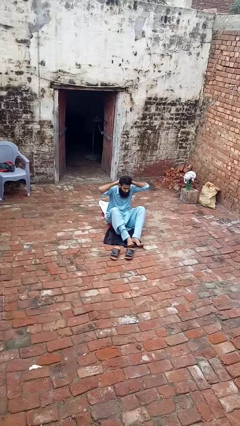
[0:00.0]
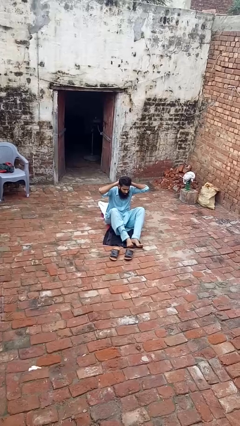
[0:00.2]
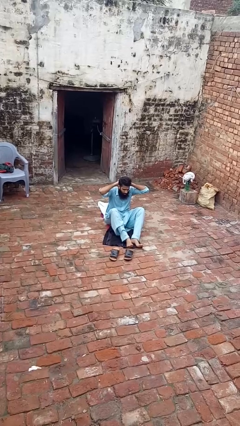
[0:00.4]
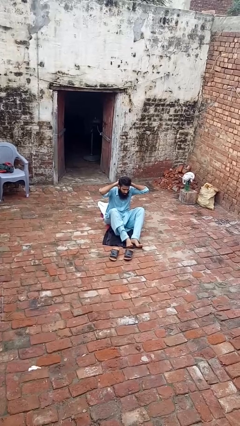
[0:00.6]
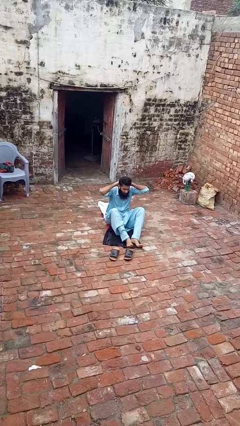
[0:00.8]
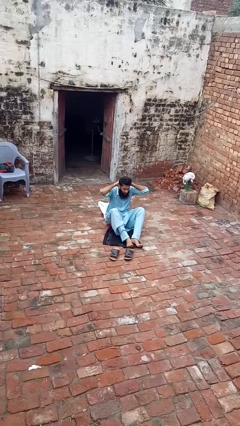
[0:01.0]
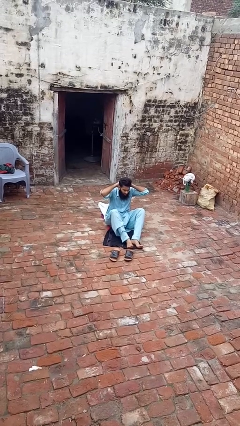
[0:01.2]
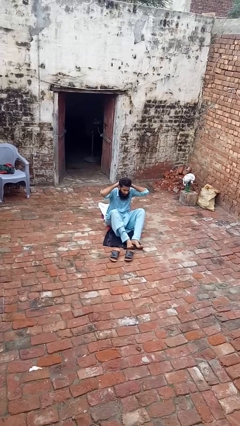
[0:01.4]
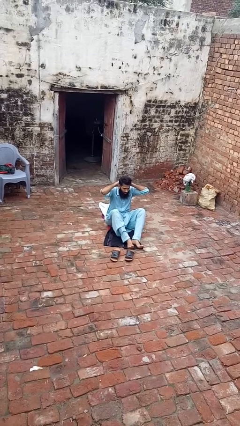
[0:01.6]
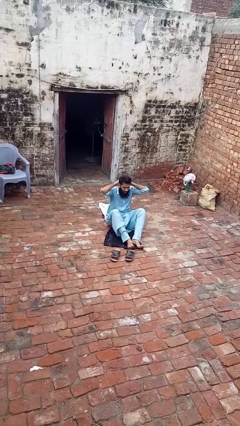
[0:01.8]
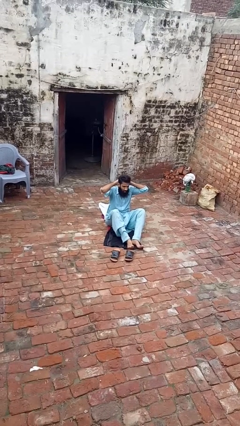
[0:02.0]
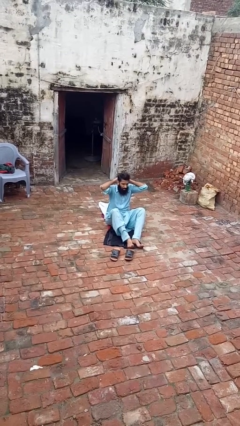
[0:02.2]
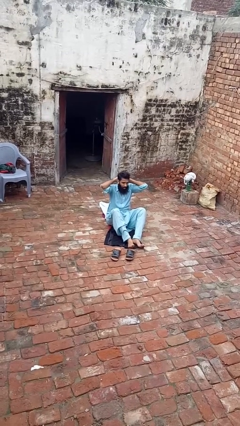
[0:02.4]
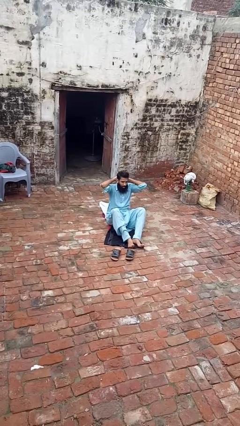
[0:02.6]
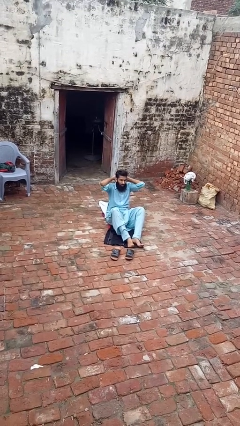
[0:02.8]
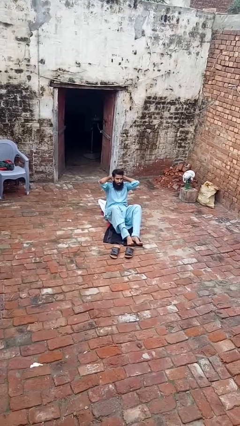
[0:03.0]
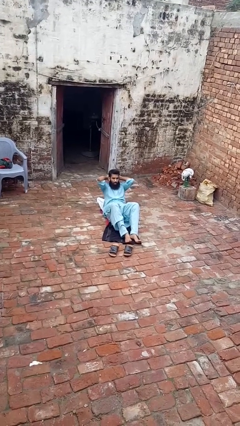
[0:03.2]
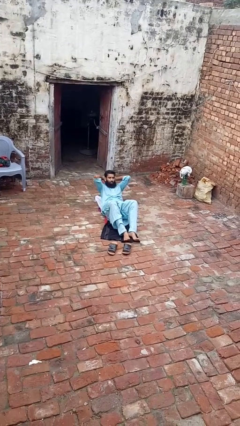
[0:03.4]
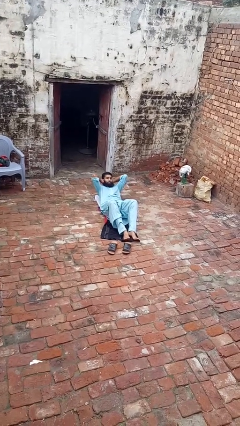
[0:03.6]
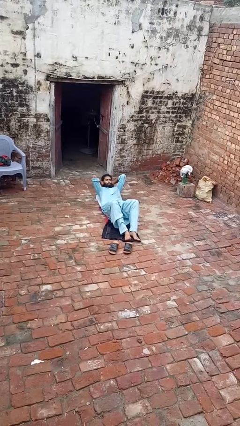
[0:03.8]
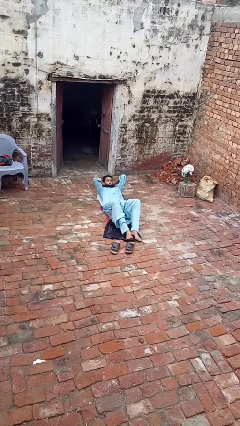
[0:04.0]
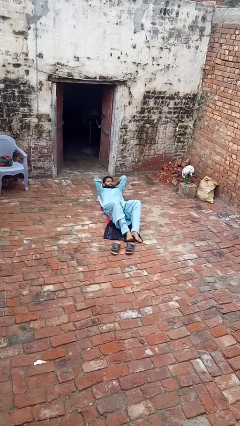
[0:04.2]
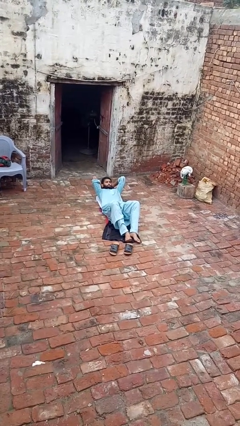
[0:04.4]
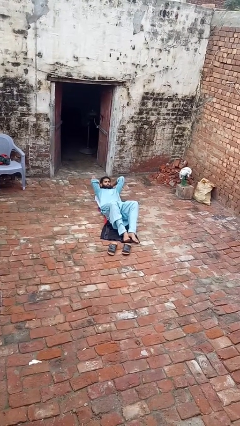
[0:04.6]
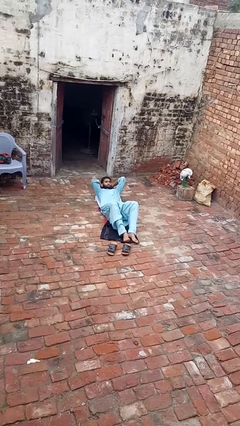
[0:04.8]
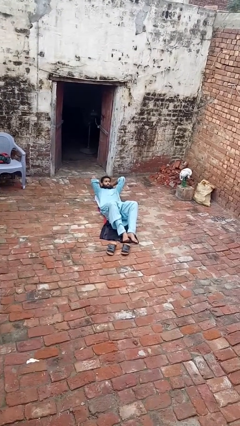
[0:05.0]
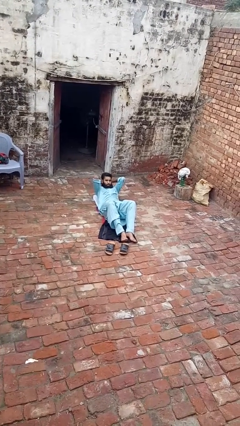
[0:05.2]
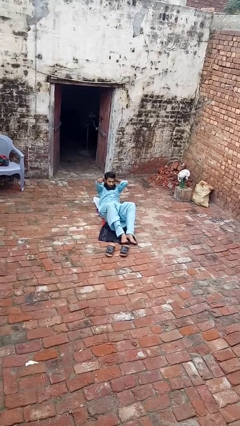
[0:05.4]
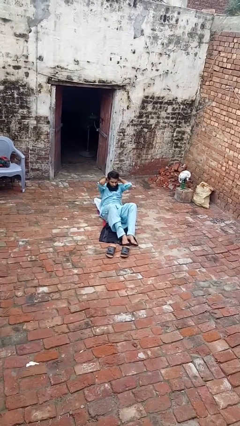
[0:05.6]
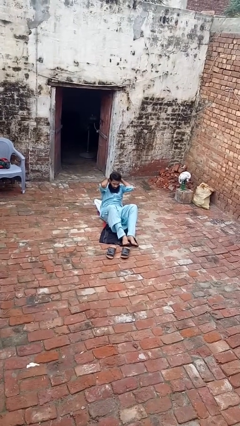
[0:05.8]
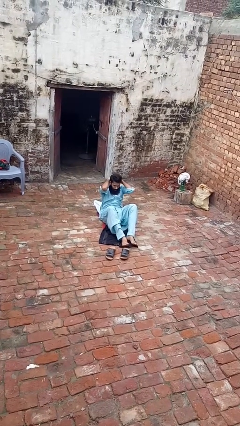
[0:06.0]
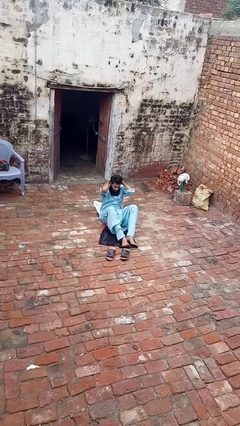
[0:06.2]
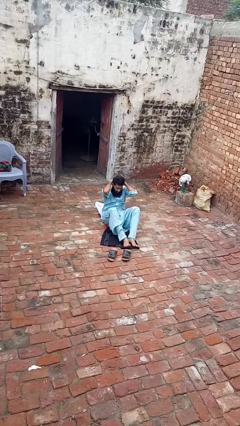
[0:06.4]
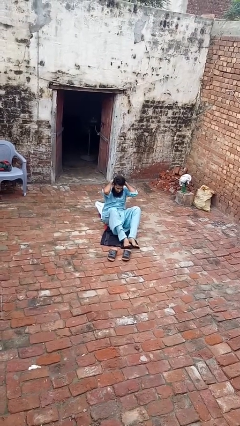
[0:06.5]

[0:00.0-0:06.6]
person exercises with situp

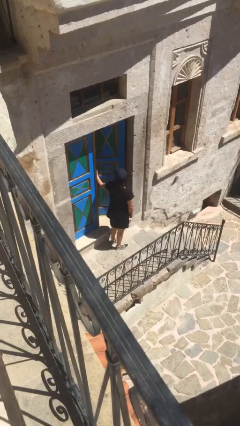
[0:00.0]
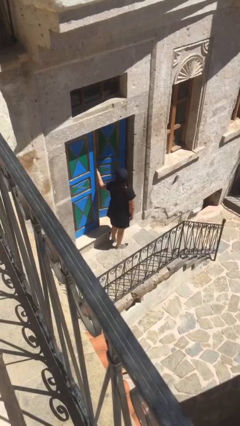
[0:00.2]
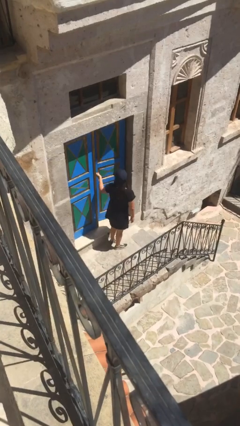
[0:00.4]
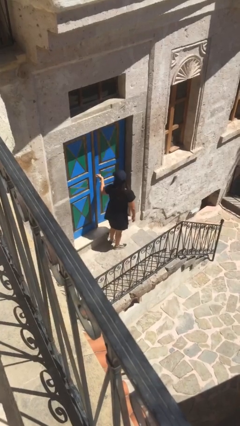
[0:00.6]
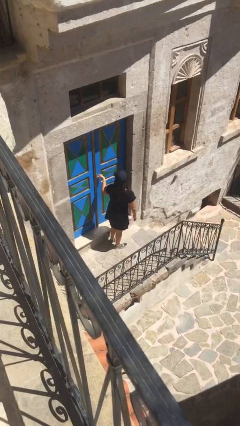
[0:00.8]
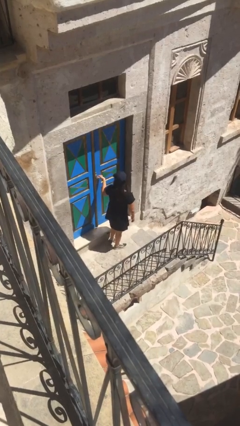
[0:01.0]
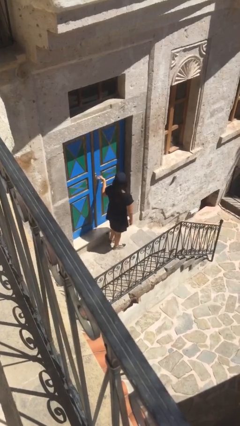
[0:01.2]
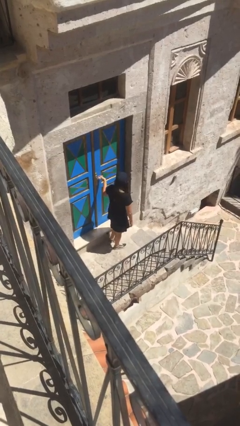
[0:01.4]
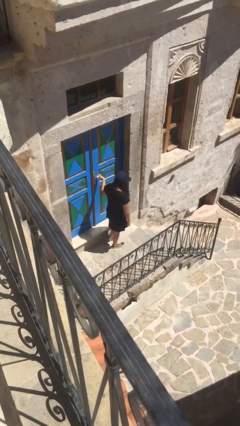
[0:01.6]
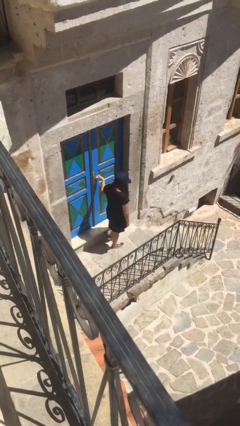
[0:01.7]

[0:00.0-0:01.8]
person closes facility door

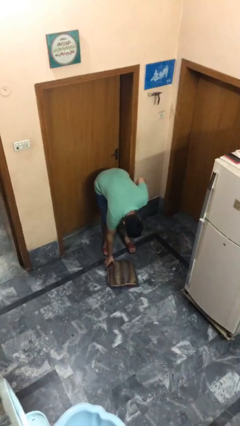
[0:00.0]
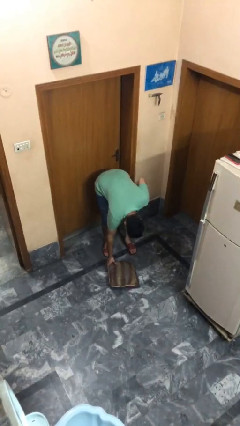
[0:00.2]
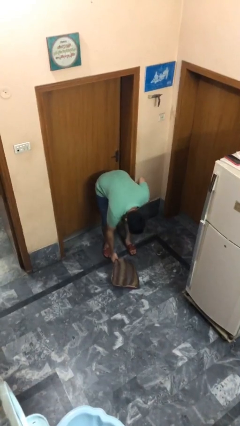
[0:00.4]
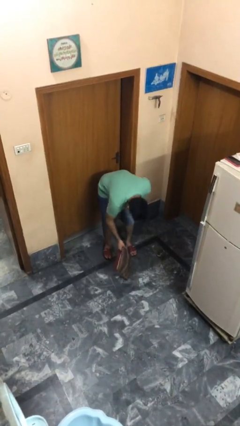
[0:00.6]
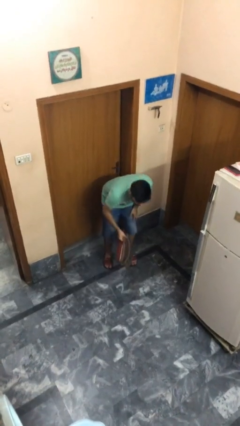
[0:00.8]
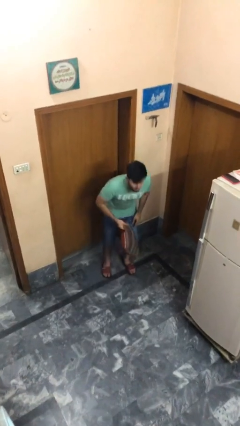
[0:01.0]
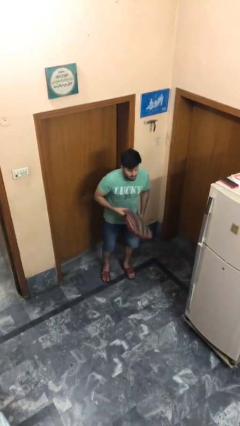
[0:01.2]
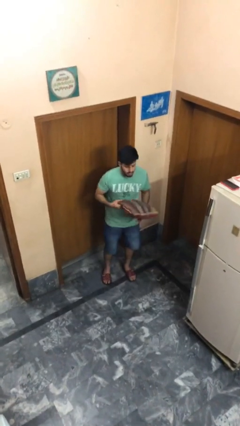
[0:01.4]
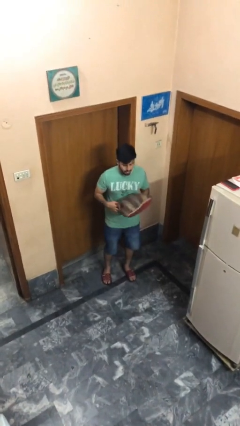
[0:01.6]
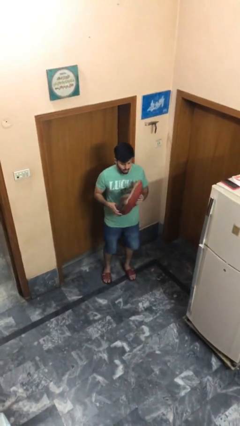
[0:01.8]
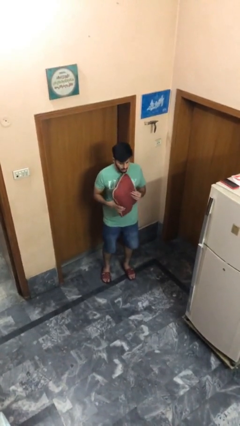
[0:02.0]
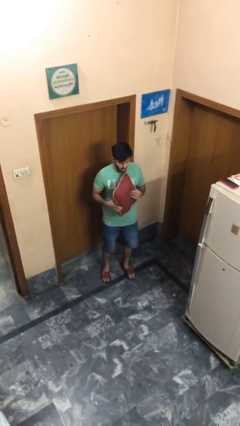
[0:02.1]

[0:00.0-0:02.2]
person picks up object from floor

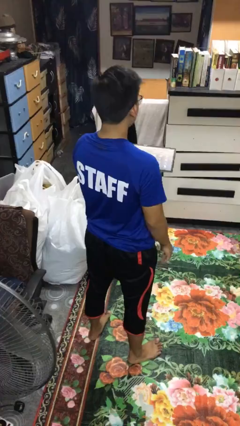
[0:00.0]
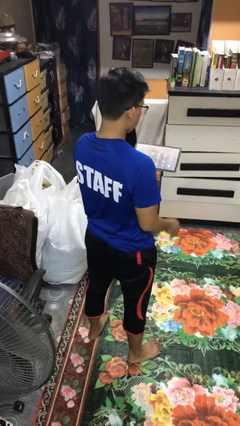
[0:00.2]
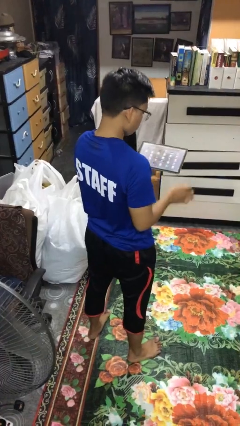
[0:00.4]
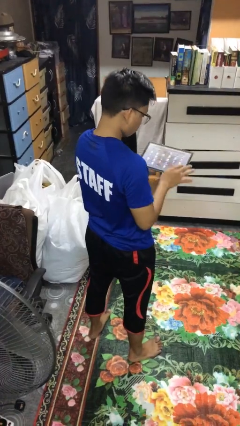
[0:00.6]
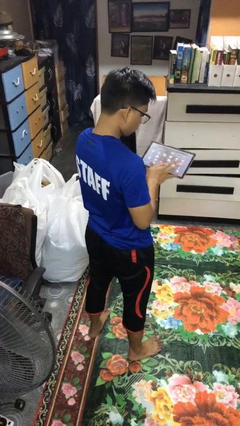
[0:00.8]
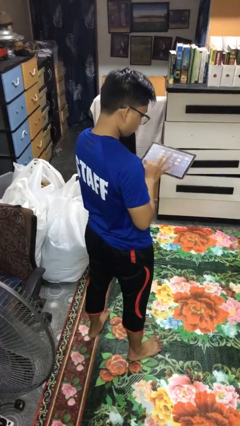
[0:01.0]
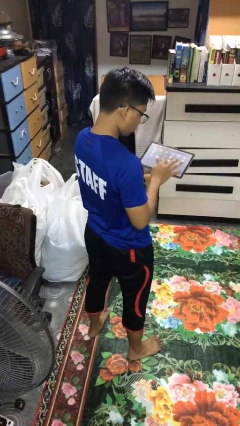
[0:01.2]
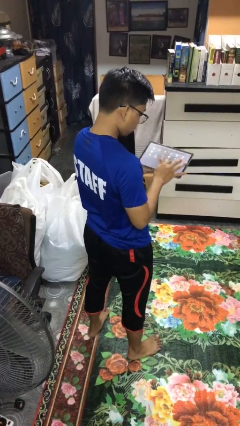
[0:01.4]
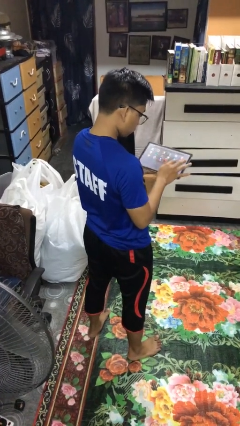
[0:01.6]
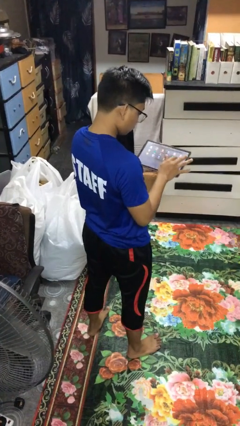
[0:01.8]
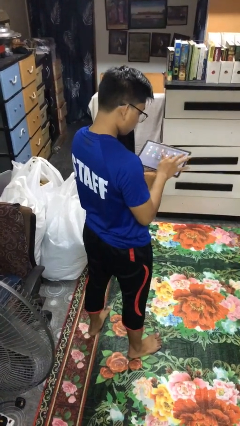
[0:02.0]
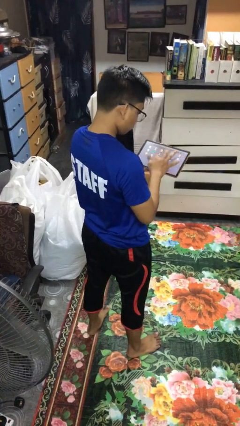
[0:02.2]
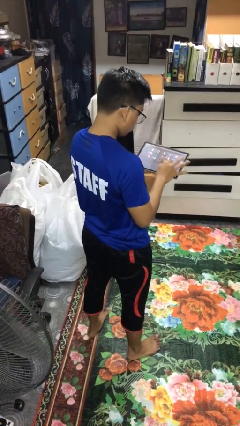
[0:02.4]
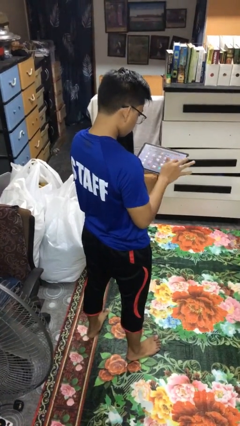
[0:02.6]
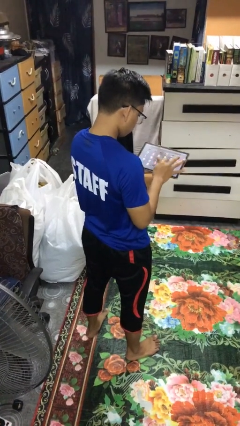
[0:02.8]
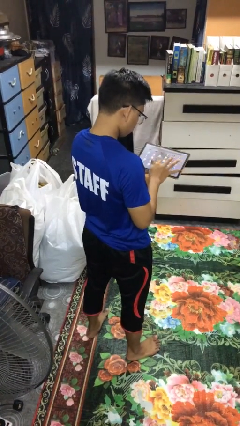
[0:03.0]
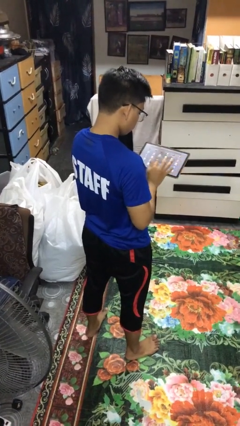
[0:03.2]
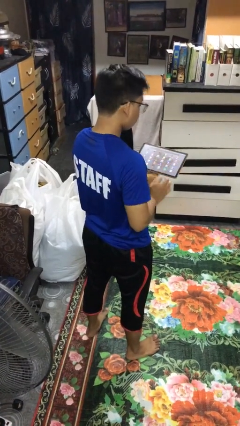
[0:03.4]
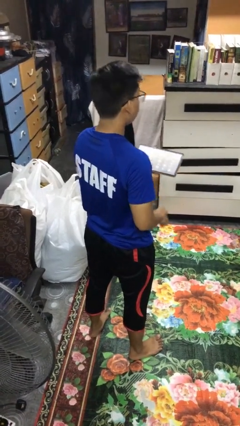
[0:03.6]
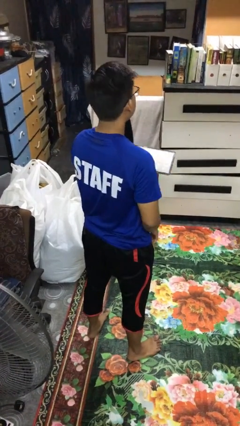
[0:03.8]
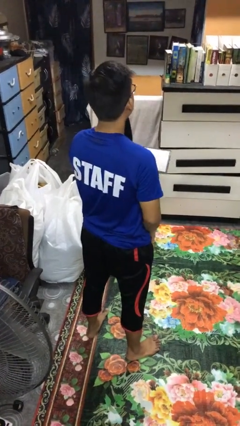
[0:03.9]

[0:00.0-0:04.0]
person interacts with tablet

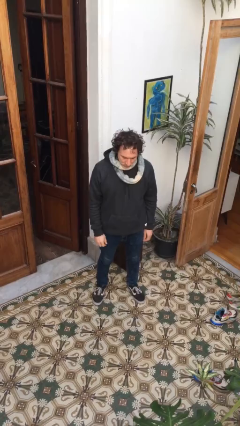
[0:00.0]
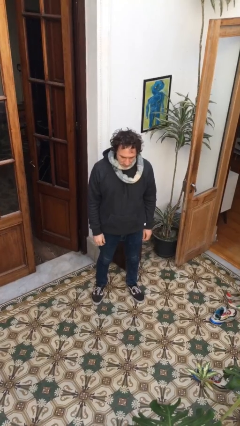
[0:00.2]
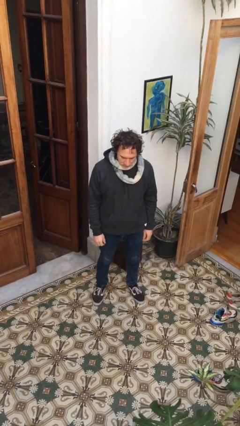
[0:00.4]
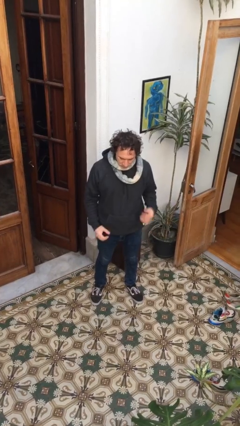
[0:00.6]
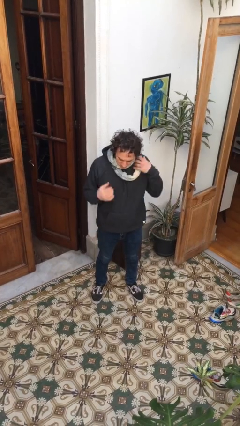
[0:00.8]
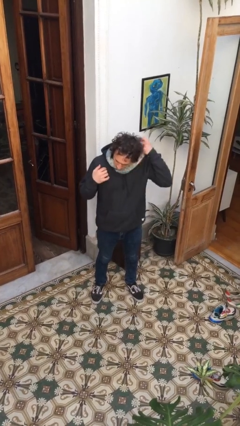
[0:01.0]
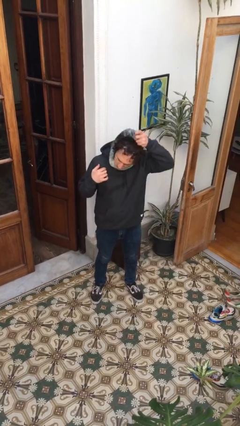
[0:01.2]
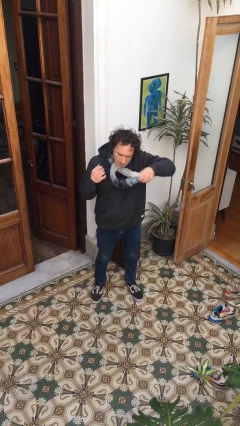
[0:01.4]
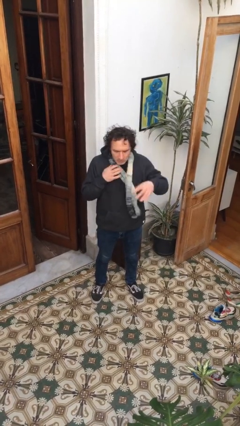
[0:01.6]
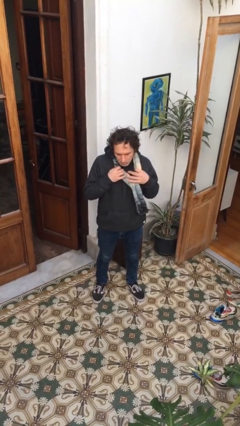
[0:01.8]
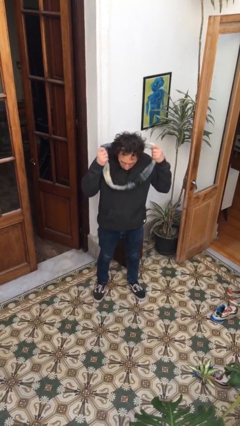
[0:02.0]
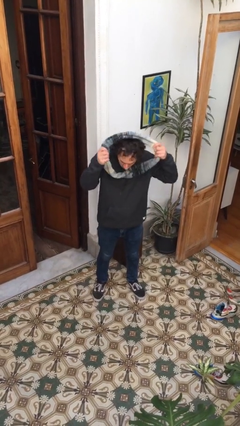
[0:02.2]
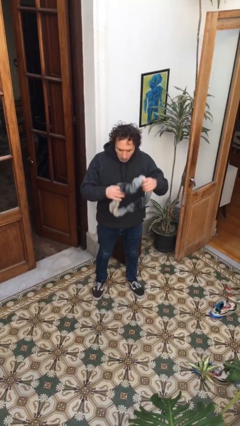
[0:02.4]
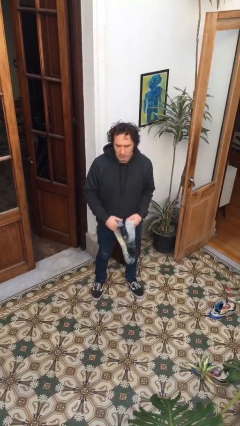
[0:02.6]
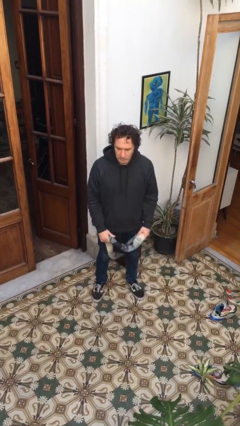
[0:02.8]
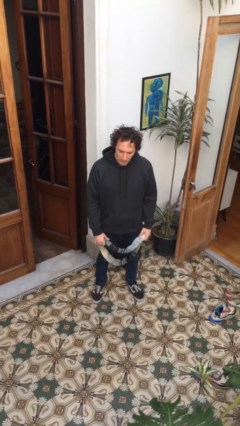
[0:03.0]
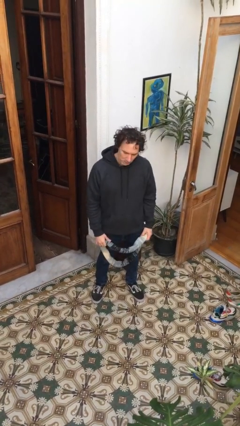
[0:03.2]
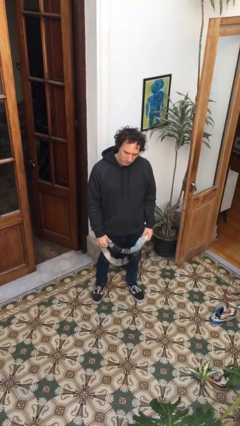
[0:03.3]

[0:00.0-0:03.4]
person takes off scarf
